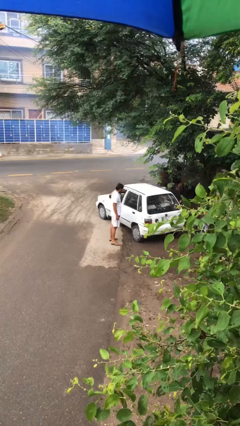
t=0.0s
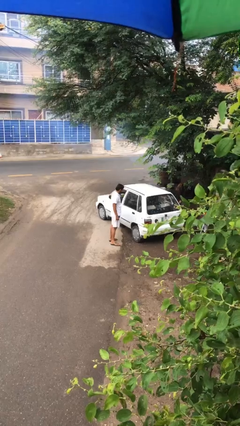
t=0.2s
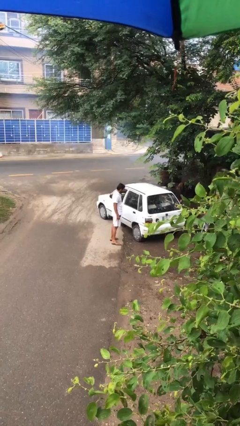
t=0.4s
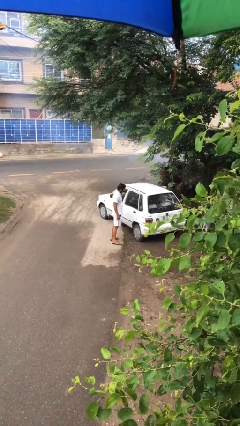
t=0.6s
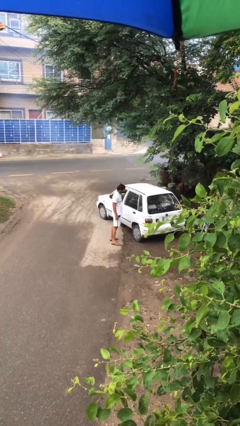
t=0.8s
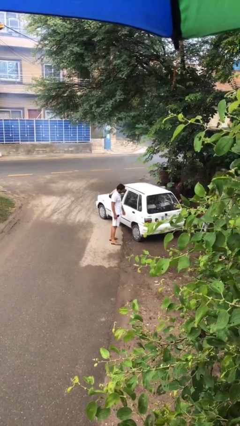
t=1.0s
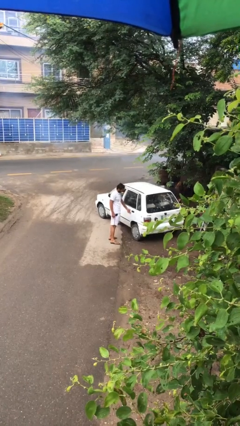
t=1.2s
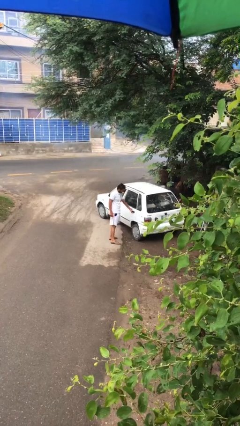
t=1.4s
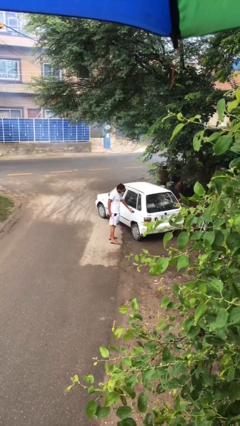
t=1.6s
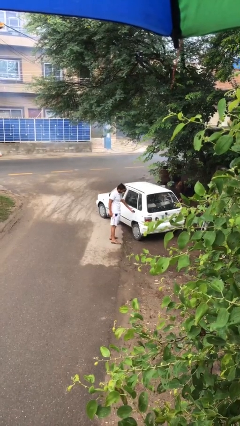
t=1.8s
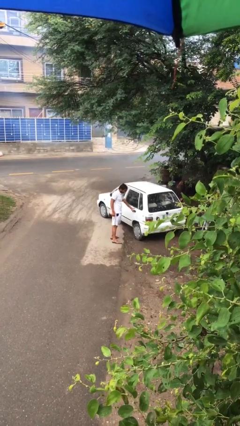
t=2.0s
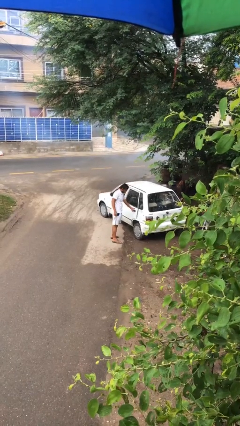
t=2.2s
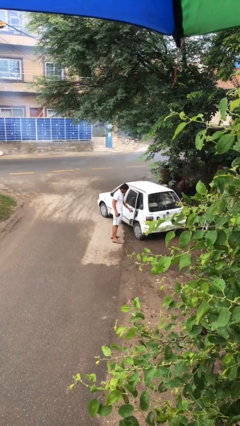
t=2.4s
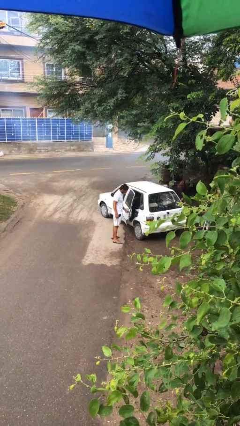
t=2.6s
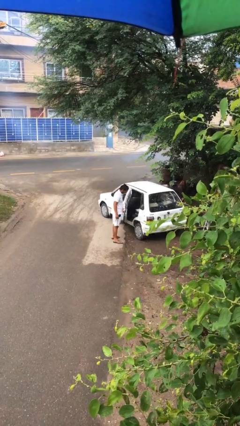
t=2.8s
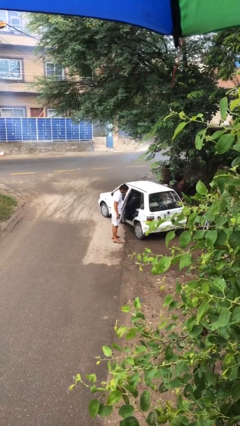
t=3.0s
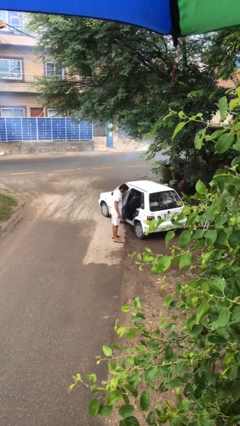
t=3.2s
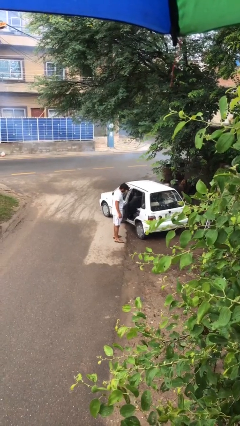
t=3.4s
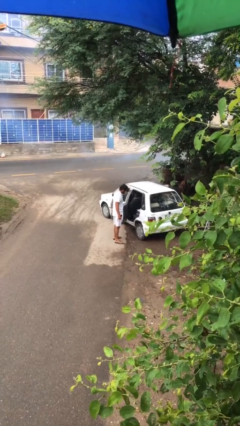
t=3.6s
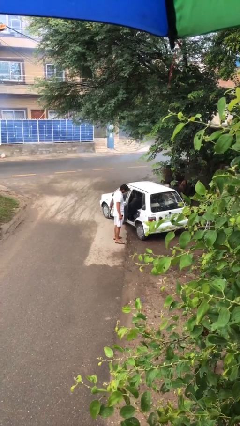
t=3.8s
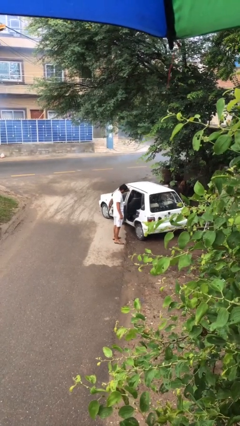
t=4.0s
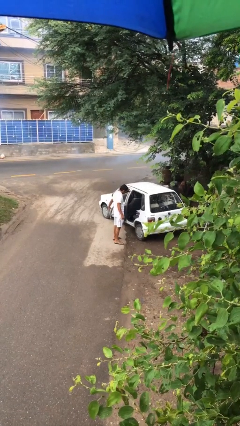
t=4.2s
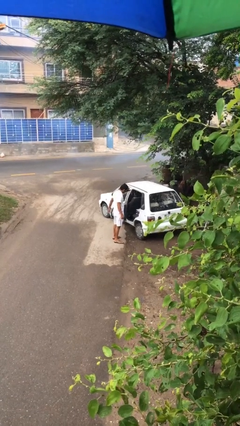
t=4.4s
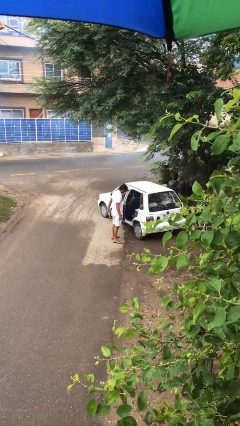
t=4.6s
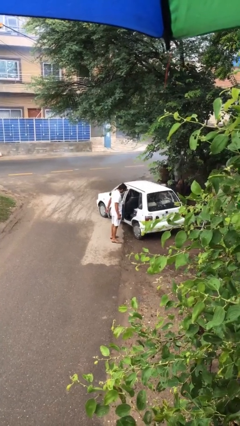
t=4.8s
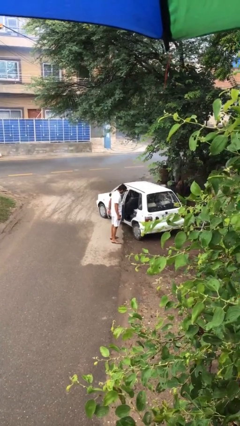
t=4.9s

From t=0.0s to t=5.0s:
person opens car door

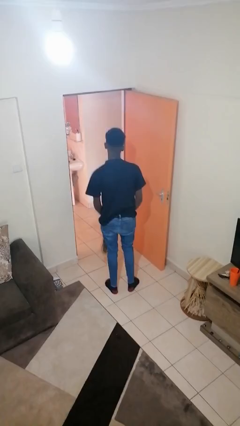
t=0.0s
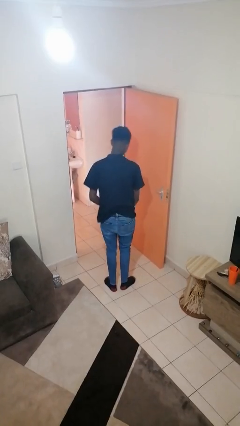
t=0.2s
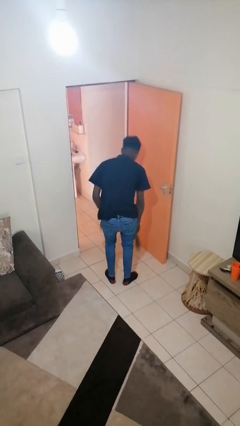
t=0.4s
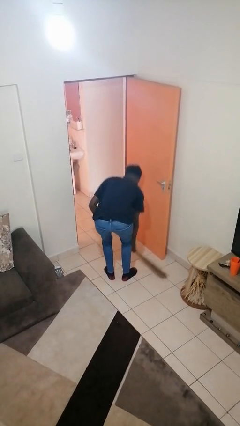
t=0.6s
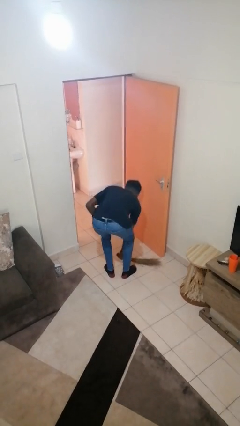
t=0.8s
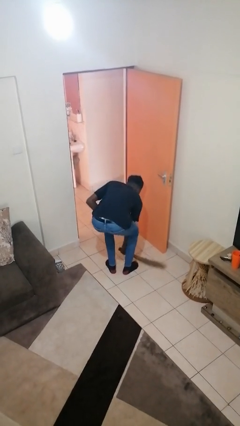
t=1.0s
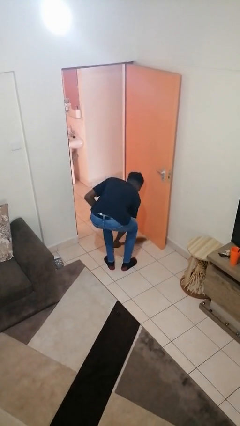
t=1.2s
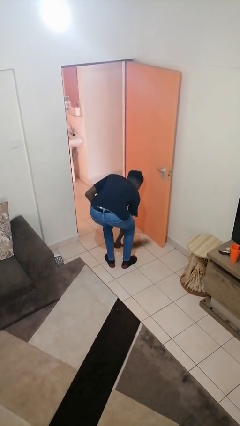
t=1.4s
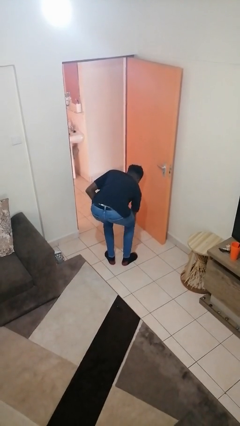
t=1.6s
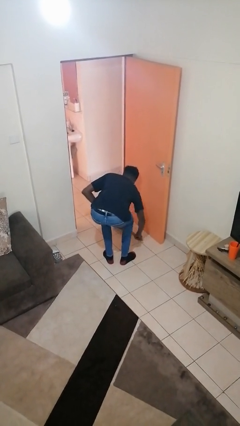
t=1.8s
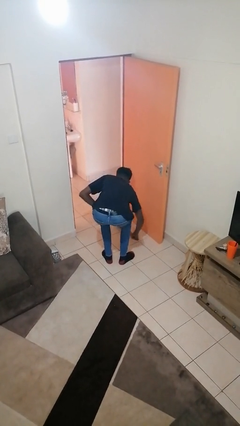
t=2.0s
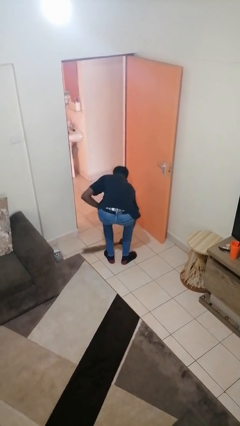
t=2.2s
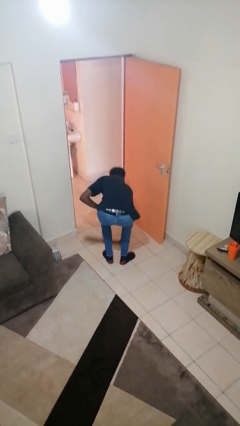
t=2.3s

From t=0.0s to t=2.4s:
person sweeps floor

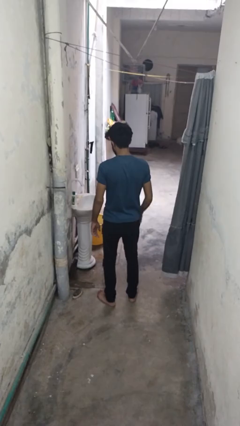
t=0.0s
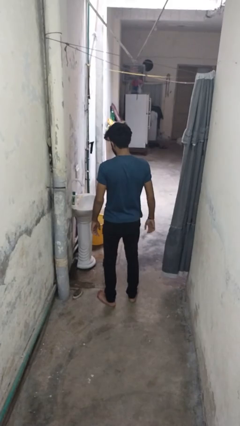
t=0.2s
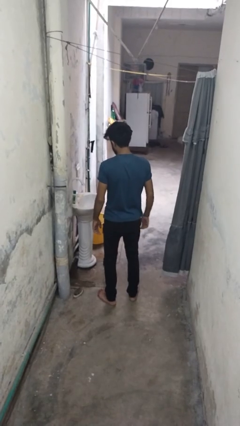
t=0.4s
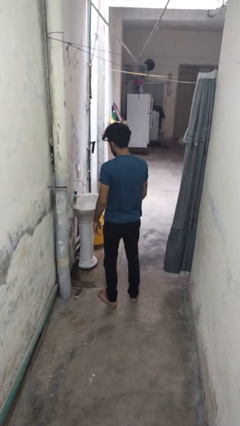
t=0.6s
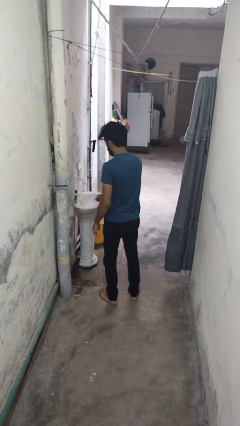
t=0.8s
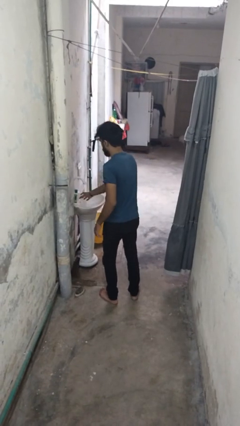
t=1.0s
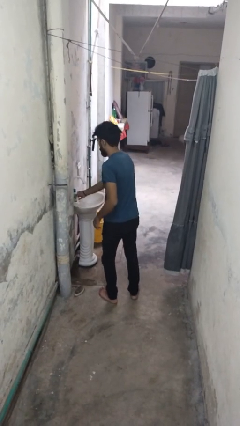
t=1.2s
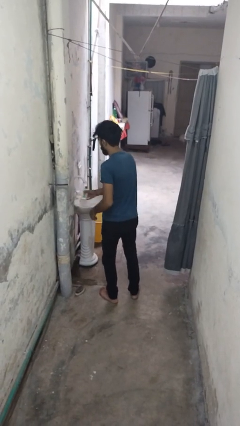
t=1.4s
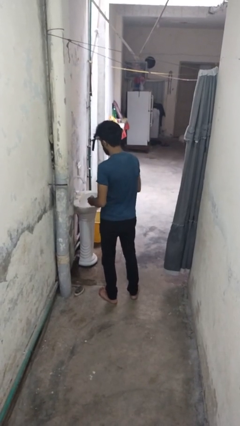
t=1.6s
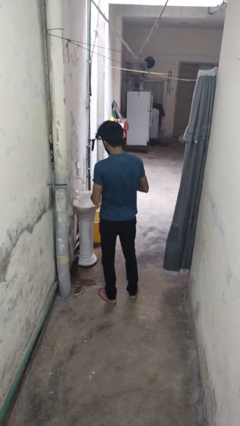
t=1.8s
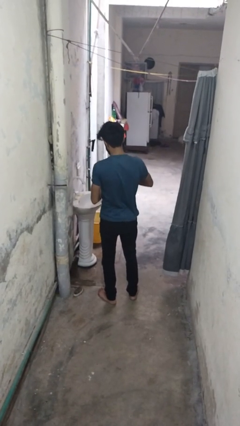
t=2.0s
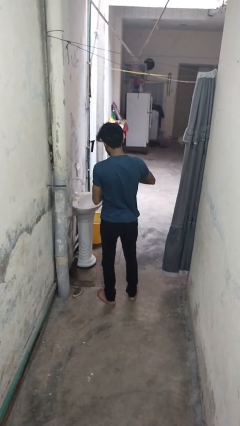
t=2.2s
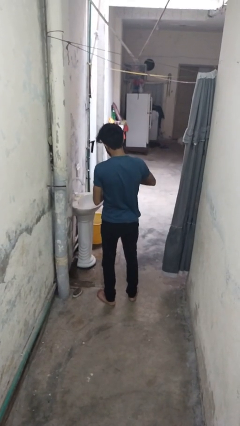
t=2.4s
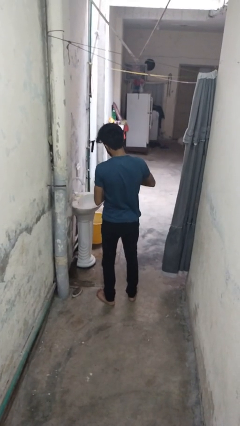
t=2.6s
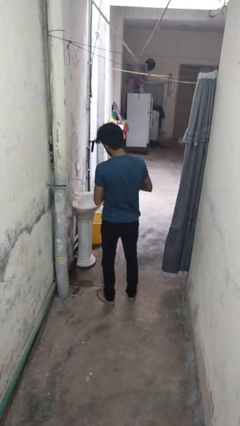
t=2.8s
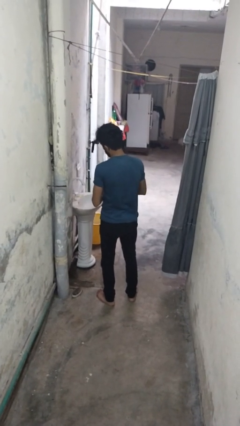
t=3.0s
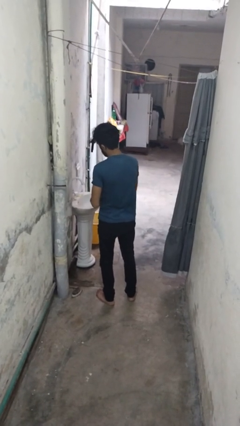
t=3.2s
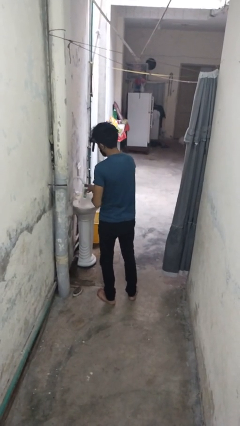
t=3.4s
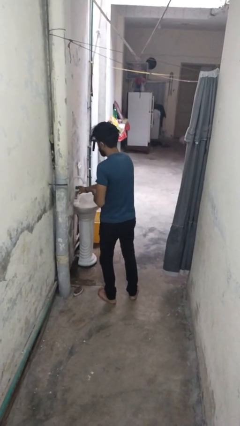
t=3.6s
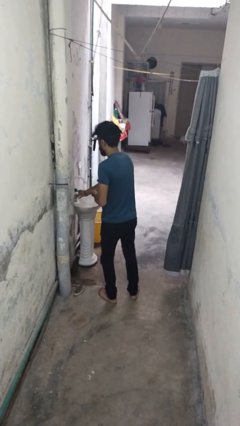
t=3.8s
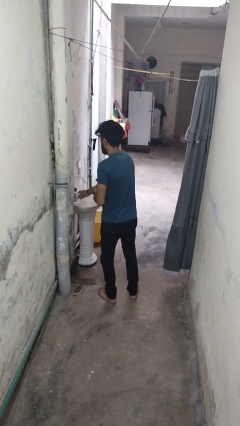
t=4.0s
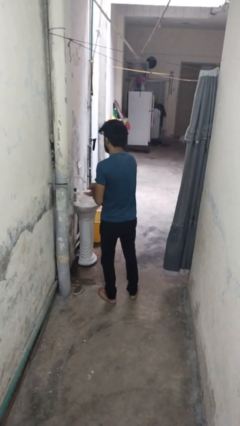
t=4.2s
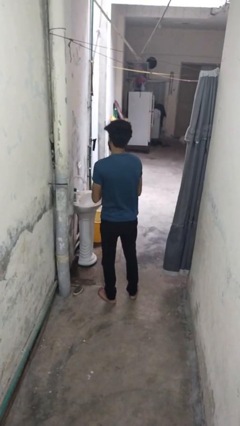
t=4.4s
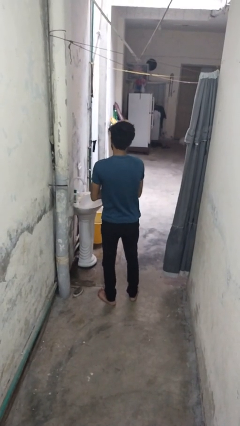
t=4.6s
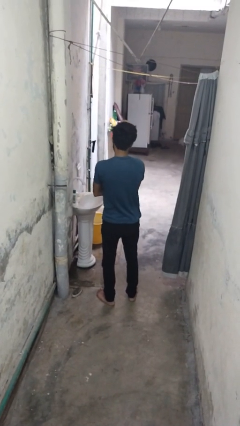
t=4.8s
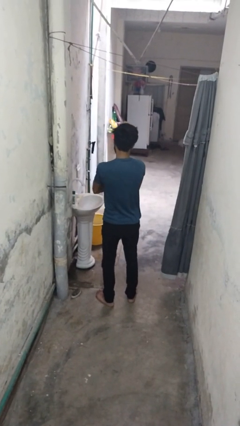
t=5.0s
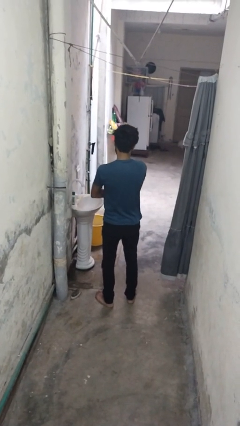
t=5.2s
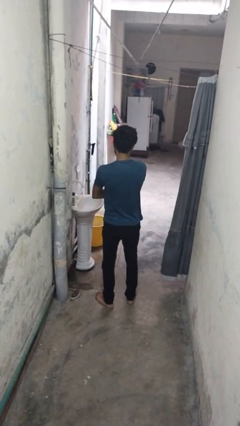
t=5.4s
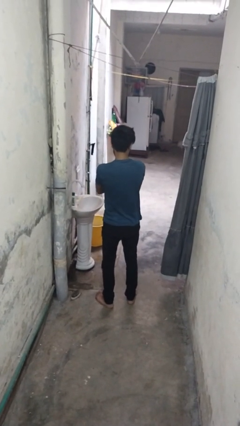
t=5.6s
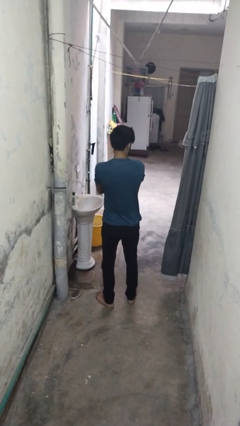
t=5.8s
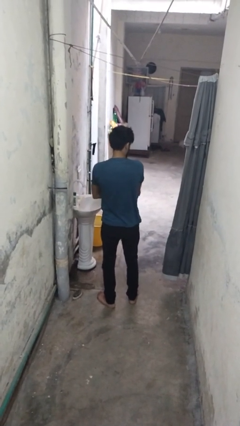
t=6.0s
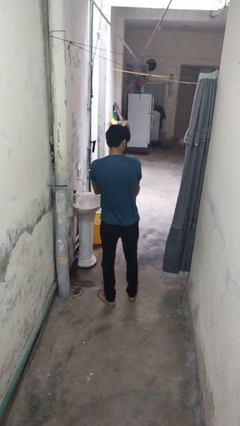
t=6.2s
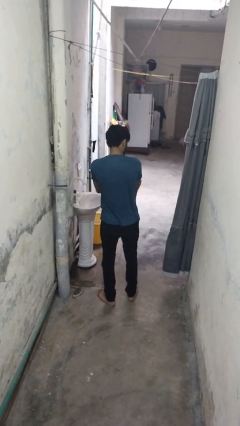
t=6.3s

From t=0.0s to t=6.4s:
person applies sunscreen

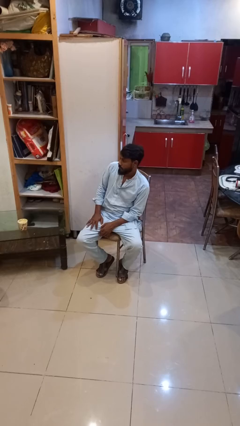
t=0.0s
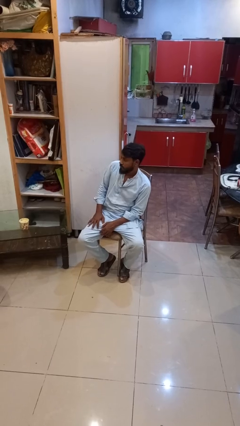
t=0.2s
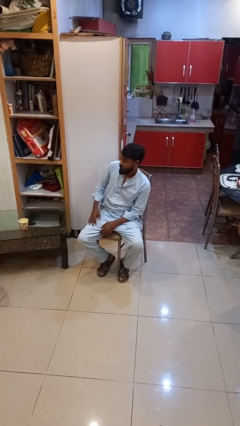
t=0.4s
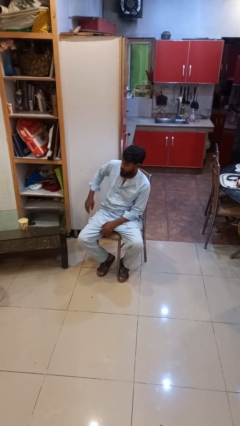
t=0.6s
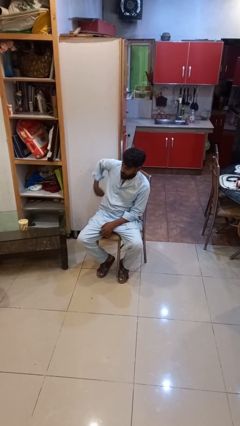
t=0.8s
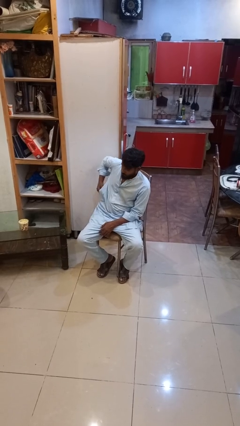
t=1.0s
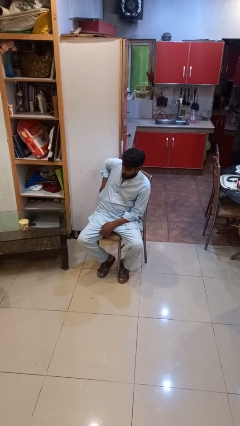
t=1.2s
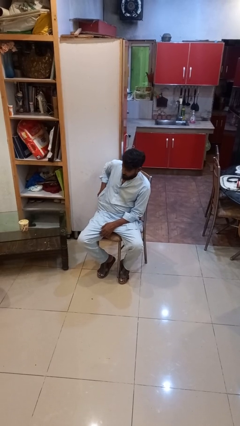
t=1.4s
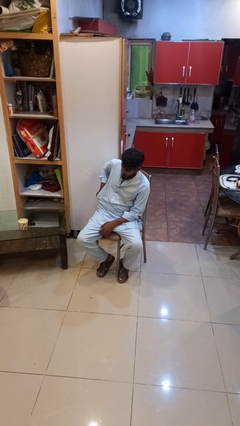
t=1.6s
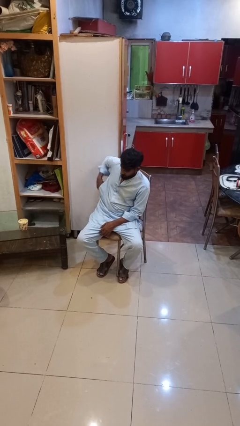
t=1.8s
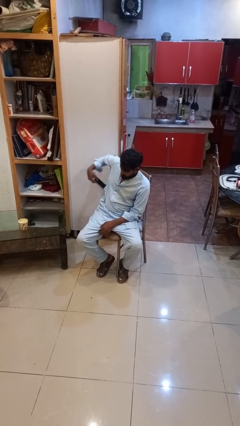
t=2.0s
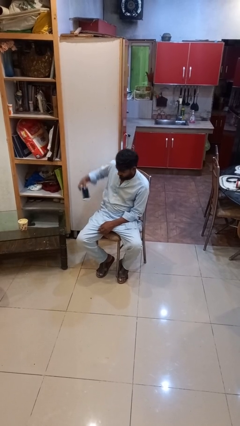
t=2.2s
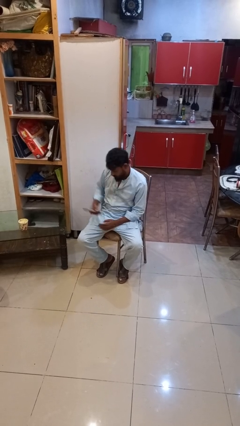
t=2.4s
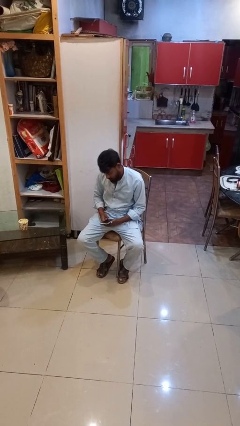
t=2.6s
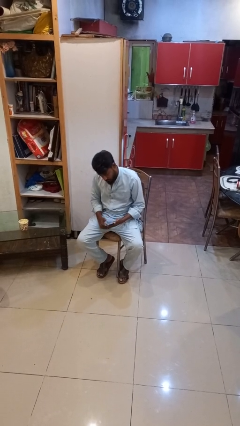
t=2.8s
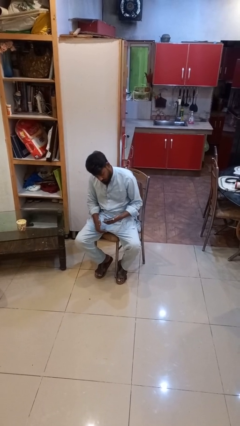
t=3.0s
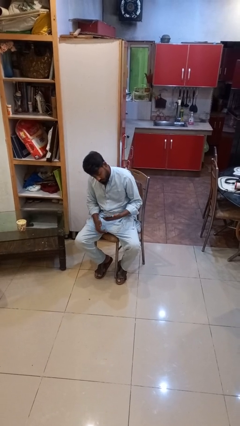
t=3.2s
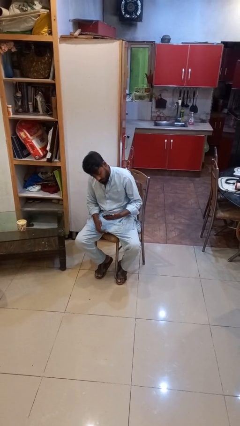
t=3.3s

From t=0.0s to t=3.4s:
person takes phone from pocket

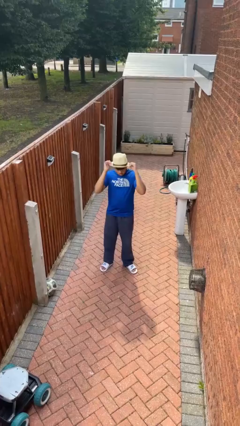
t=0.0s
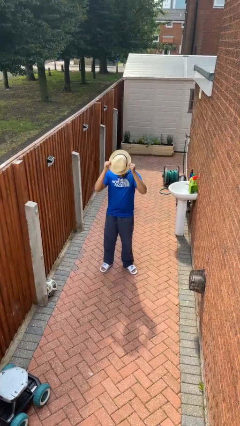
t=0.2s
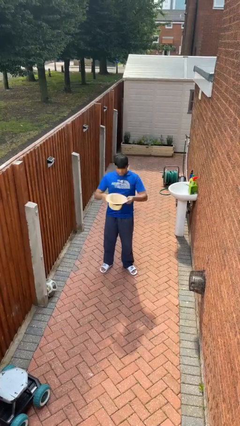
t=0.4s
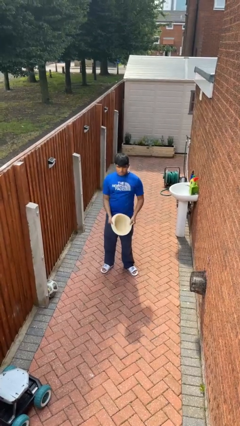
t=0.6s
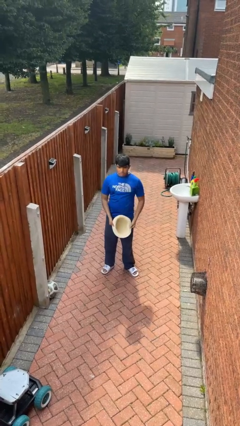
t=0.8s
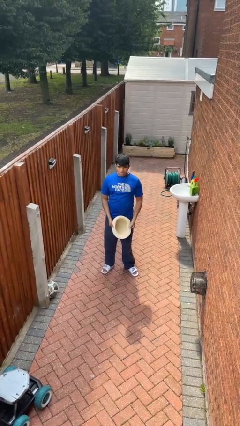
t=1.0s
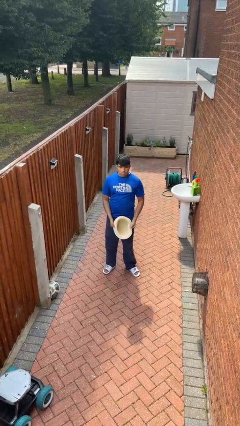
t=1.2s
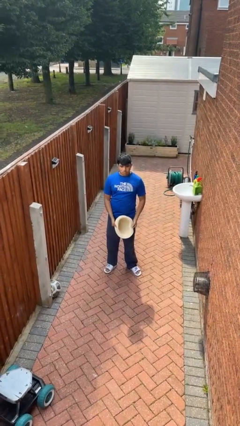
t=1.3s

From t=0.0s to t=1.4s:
person takes off hat
